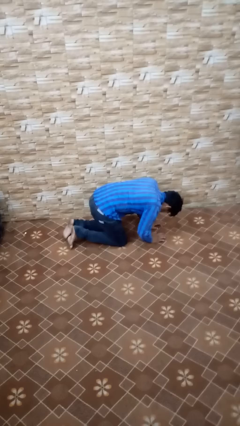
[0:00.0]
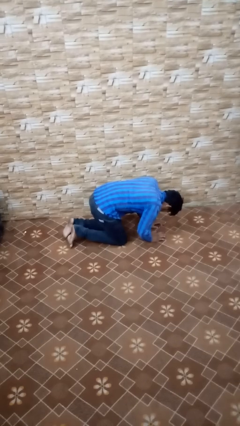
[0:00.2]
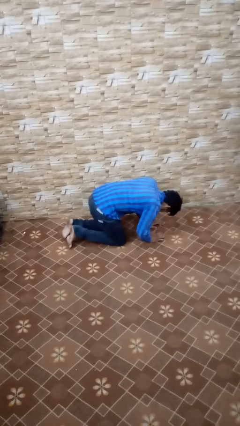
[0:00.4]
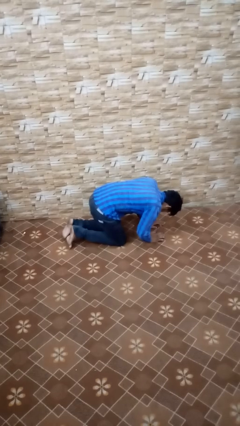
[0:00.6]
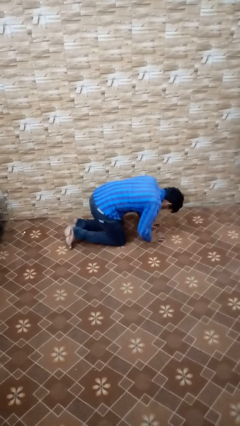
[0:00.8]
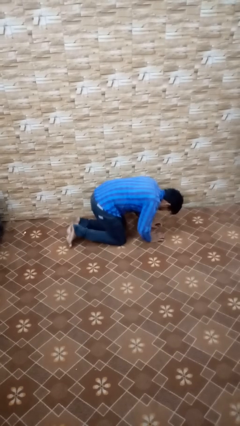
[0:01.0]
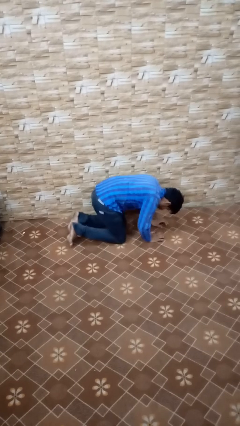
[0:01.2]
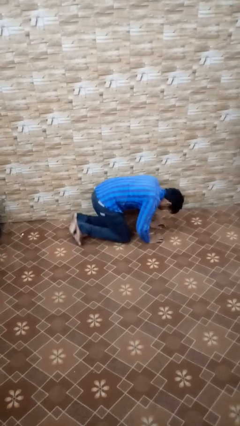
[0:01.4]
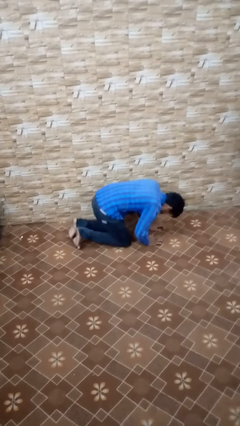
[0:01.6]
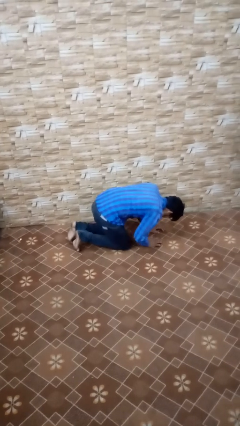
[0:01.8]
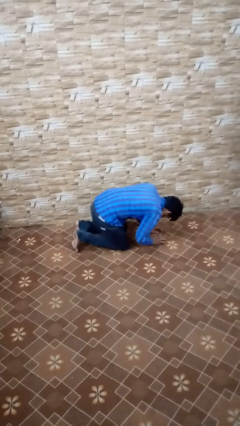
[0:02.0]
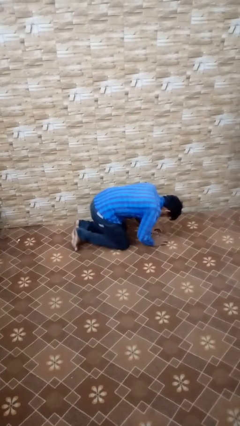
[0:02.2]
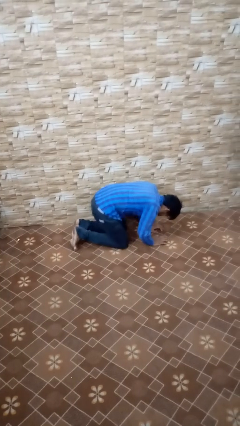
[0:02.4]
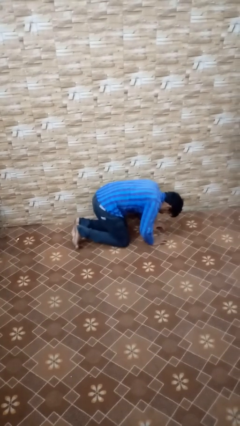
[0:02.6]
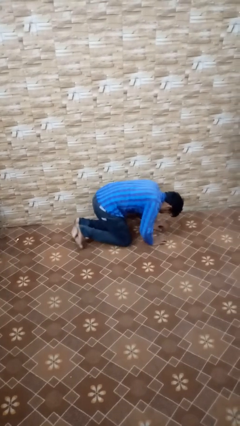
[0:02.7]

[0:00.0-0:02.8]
person crawls

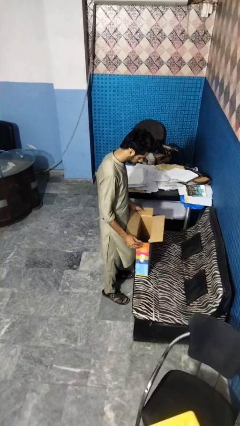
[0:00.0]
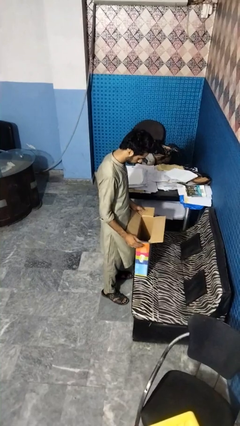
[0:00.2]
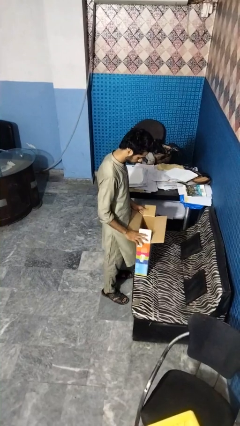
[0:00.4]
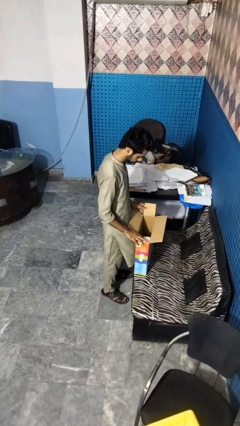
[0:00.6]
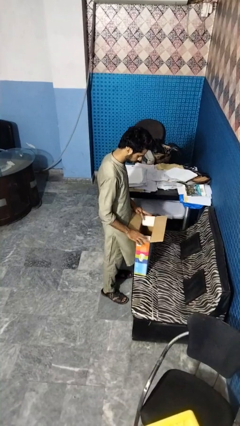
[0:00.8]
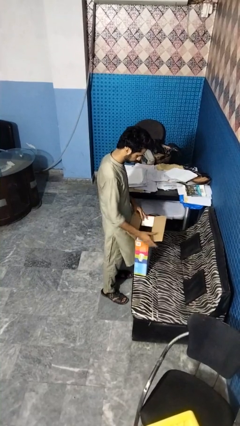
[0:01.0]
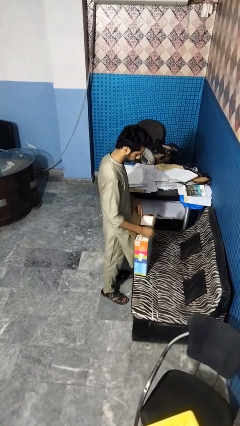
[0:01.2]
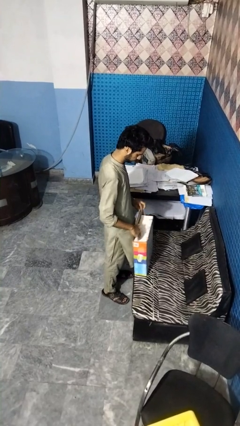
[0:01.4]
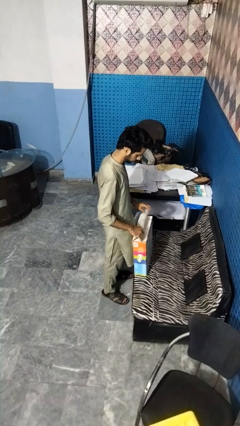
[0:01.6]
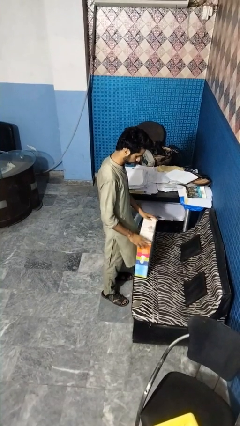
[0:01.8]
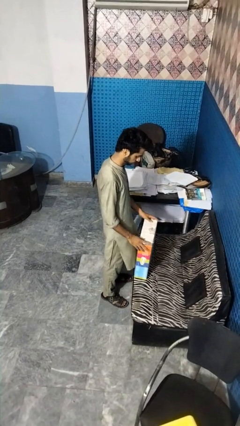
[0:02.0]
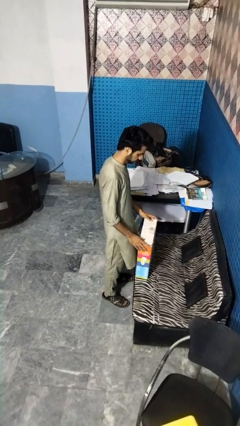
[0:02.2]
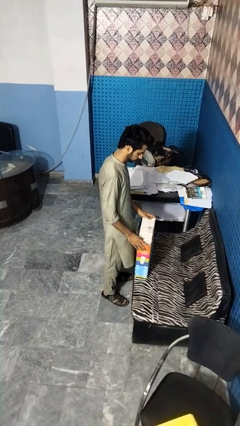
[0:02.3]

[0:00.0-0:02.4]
person closes box

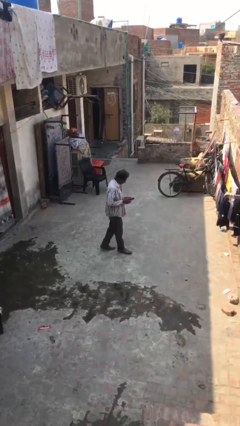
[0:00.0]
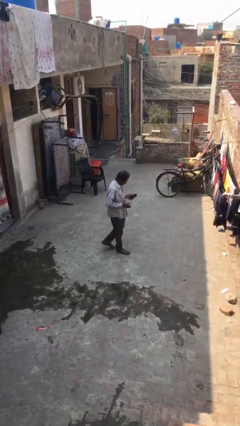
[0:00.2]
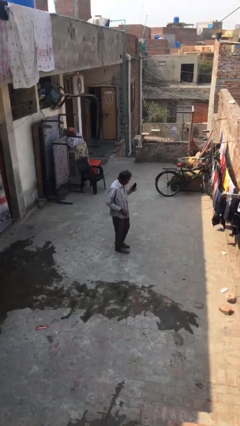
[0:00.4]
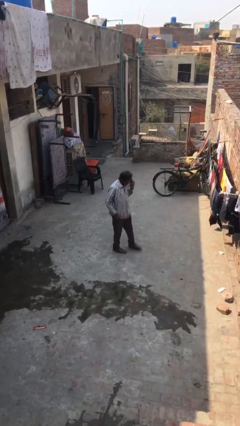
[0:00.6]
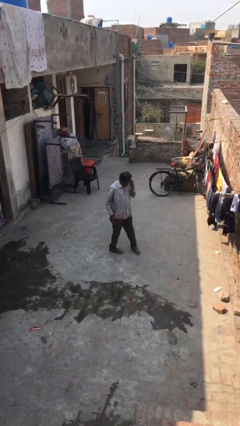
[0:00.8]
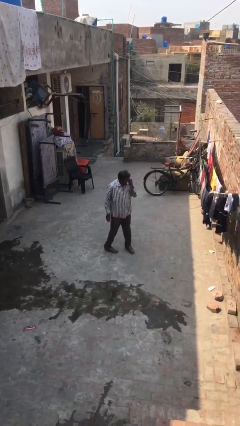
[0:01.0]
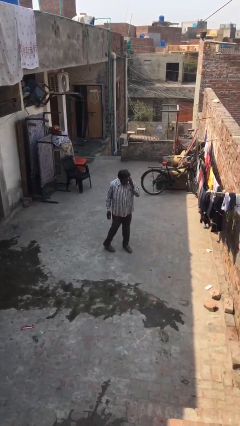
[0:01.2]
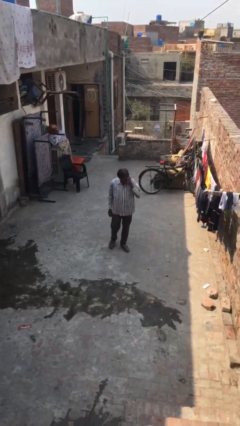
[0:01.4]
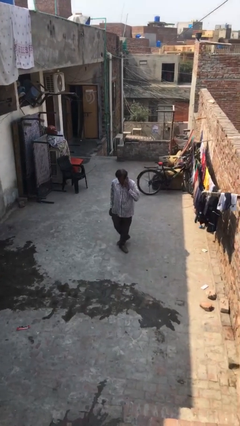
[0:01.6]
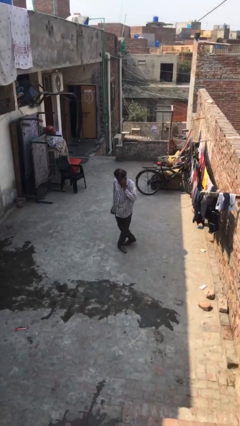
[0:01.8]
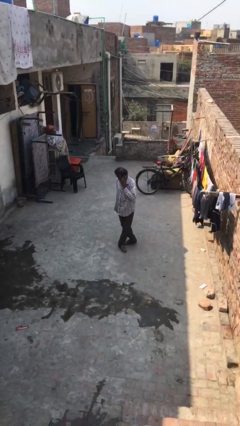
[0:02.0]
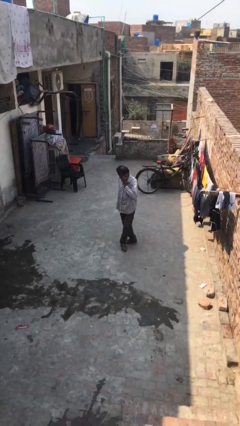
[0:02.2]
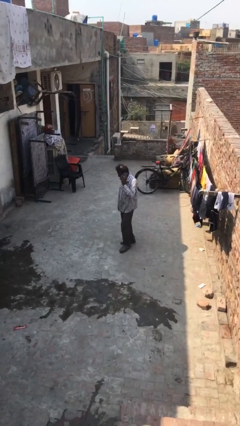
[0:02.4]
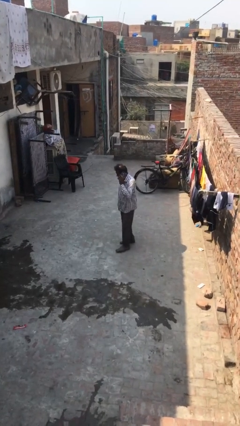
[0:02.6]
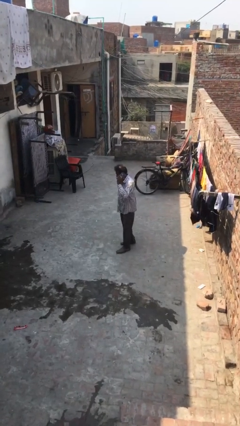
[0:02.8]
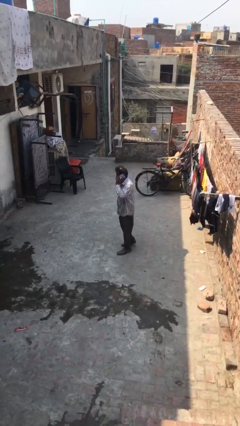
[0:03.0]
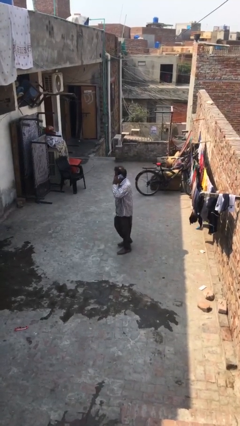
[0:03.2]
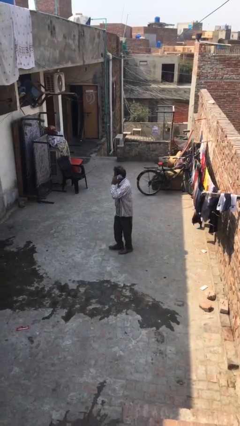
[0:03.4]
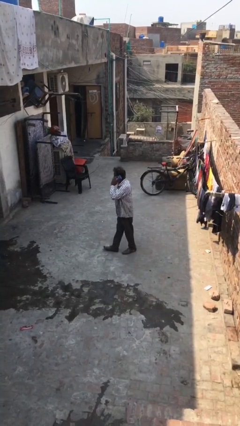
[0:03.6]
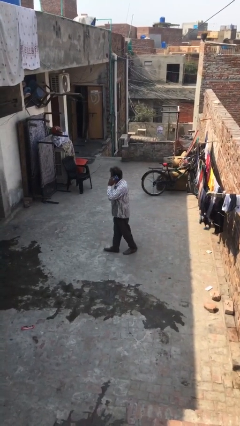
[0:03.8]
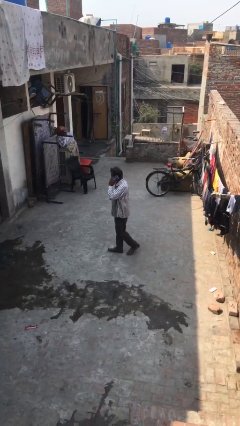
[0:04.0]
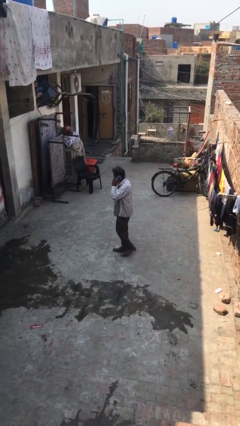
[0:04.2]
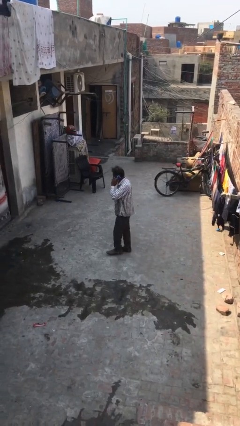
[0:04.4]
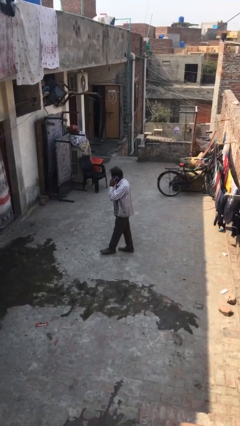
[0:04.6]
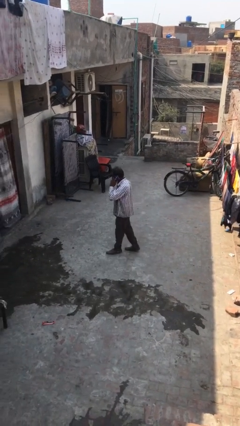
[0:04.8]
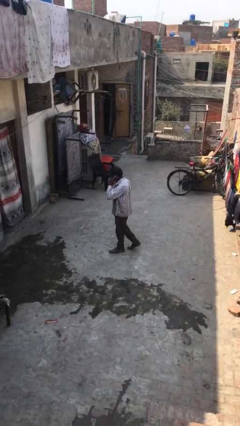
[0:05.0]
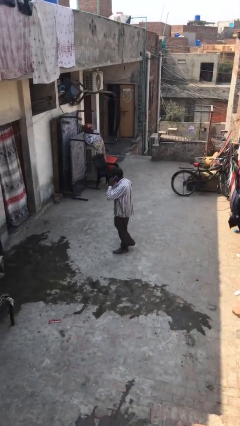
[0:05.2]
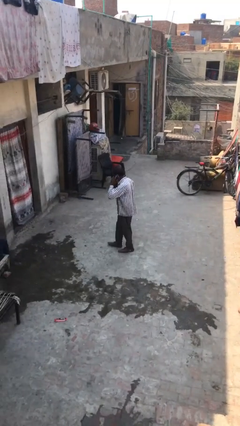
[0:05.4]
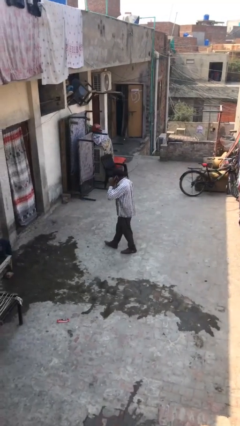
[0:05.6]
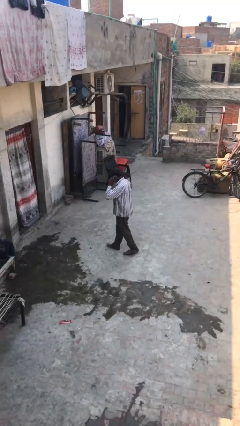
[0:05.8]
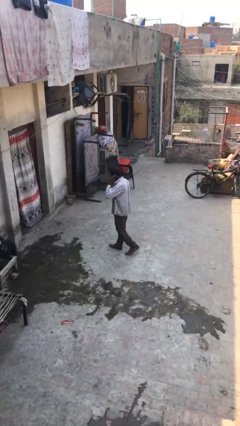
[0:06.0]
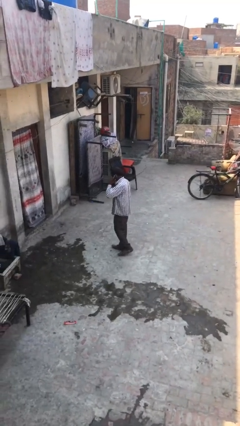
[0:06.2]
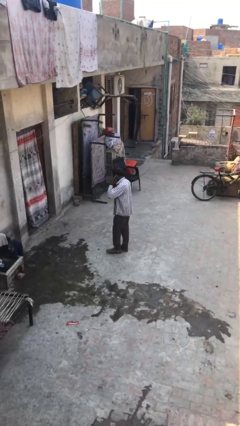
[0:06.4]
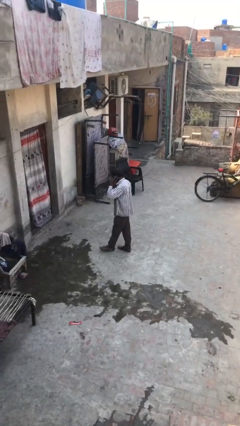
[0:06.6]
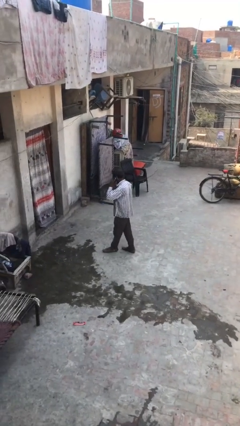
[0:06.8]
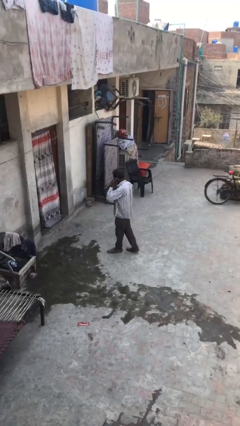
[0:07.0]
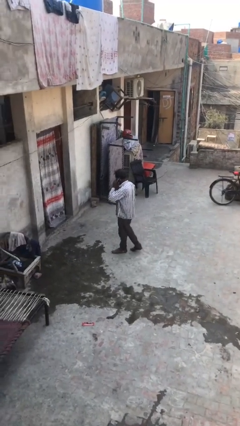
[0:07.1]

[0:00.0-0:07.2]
person talks on phone

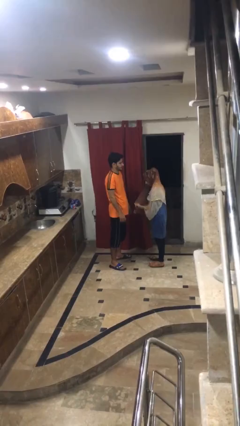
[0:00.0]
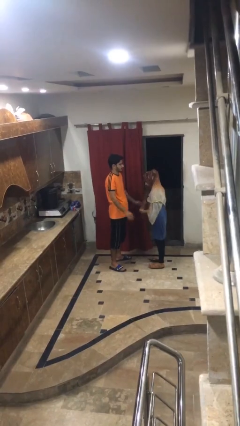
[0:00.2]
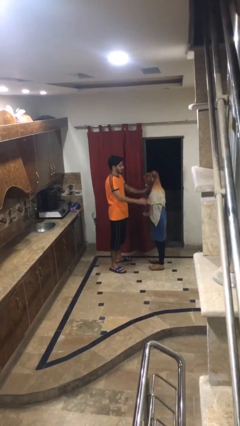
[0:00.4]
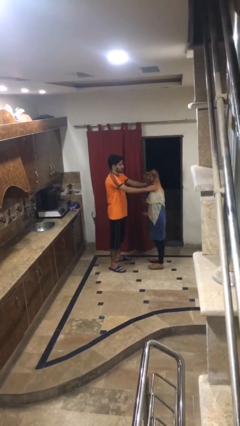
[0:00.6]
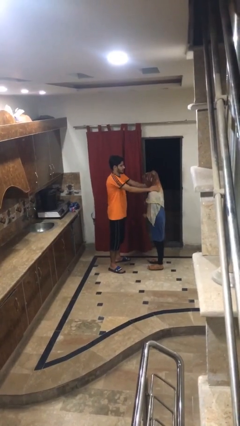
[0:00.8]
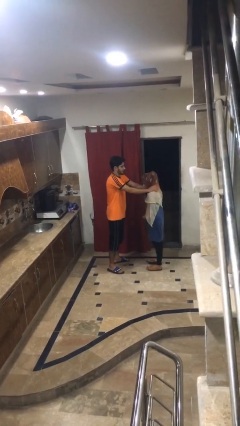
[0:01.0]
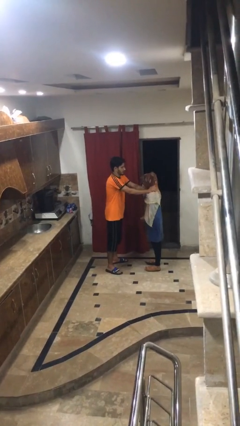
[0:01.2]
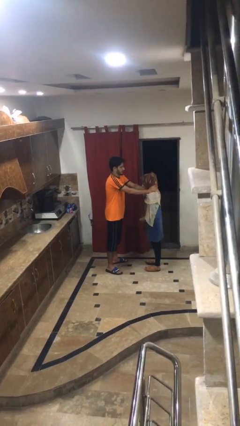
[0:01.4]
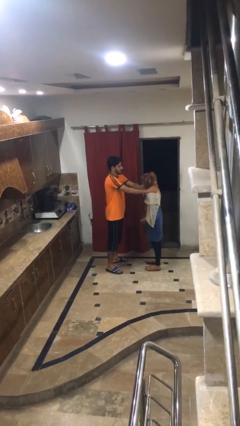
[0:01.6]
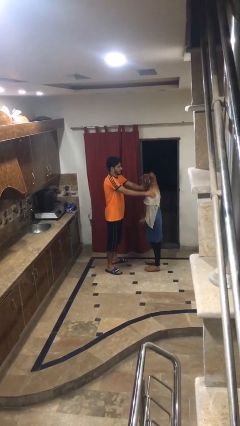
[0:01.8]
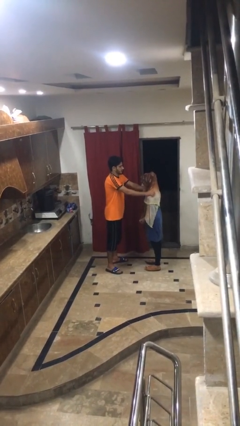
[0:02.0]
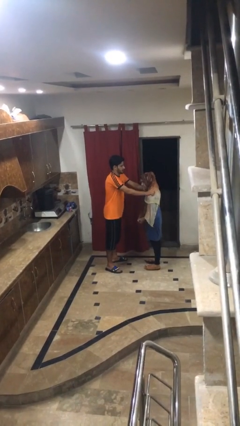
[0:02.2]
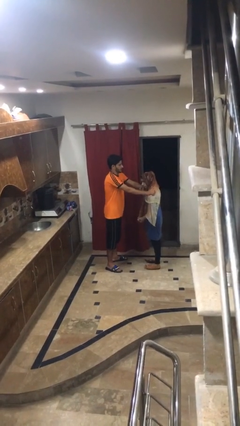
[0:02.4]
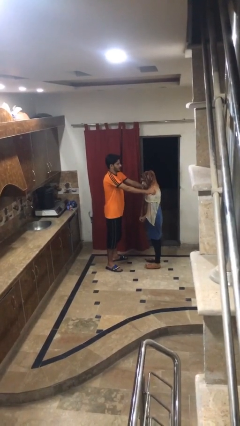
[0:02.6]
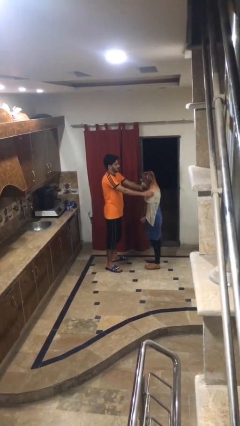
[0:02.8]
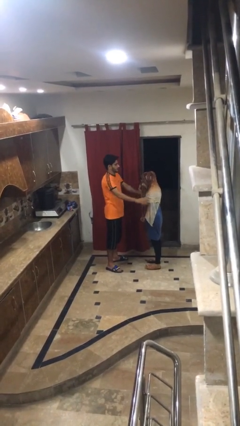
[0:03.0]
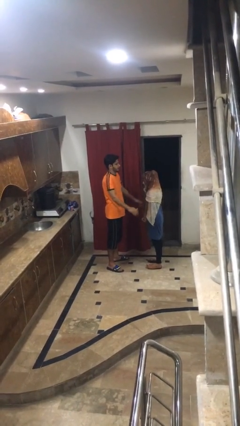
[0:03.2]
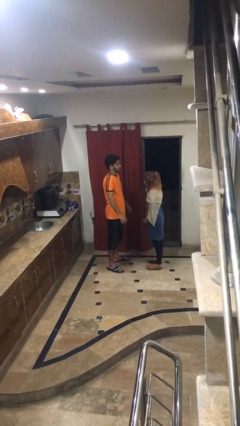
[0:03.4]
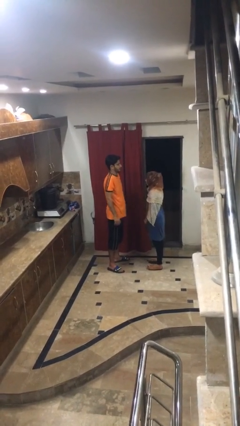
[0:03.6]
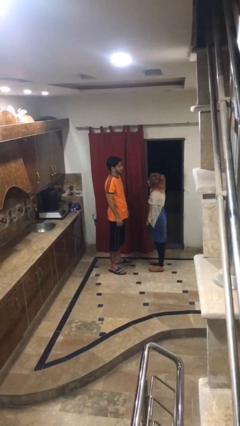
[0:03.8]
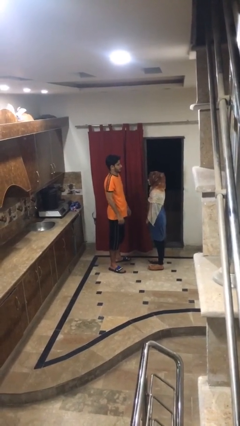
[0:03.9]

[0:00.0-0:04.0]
person pounds shoulders of person

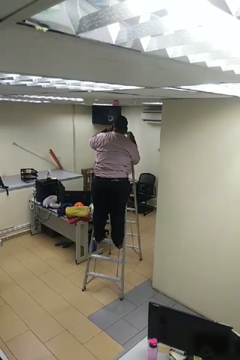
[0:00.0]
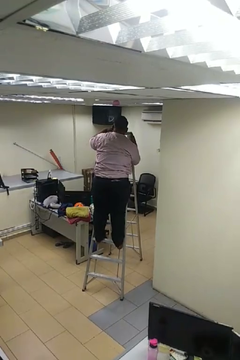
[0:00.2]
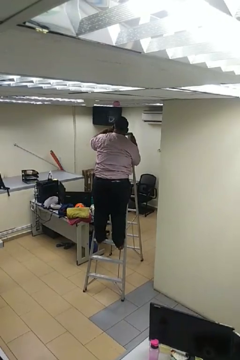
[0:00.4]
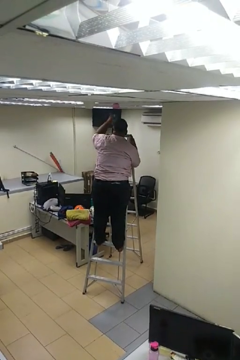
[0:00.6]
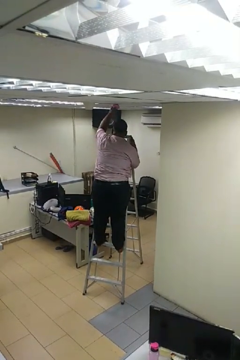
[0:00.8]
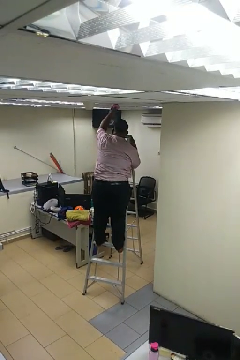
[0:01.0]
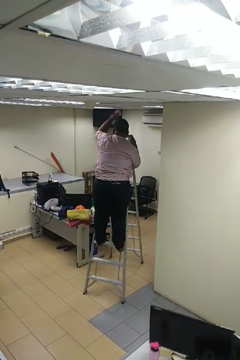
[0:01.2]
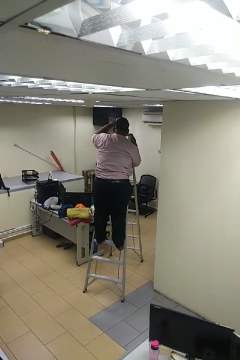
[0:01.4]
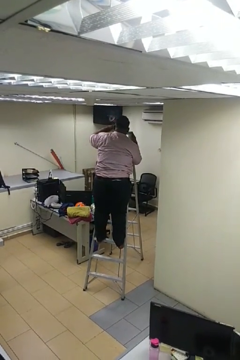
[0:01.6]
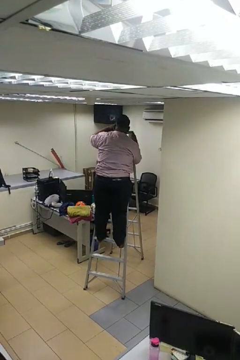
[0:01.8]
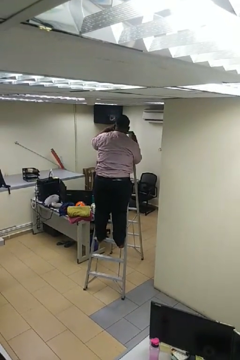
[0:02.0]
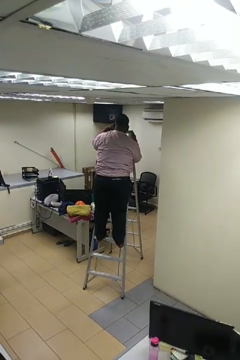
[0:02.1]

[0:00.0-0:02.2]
person takes down smoke detector
